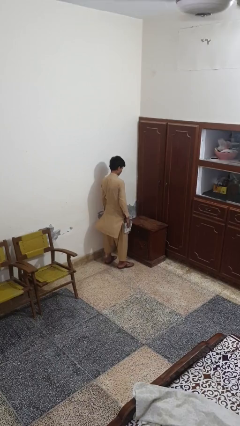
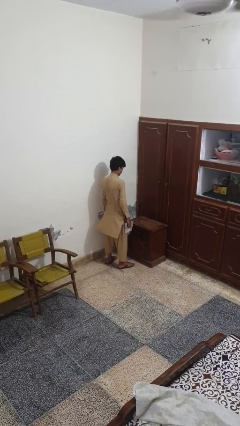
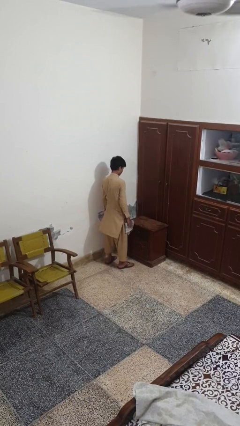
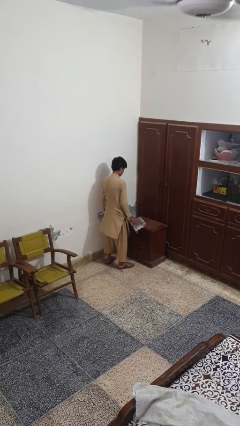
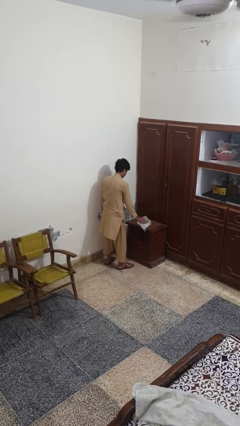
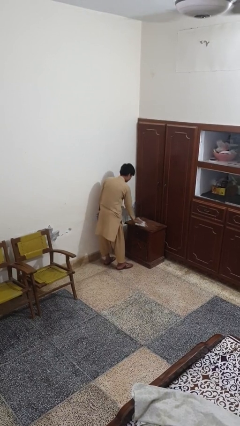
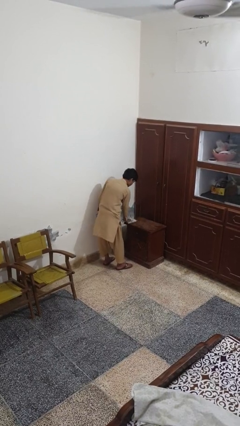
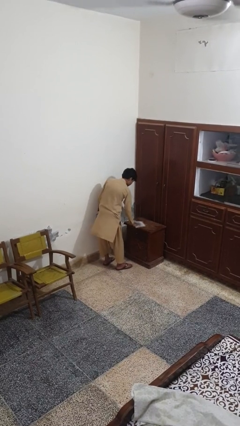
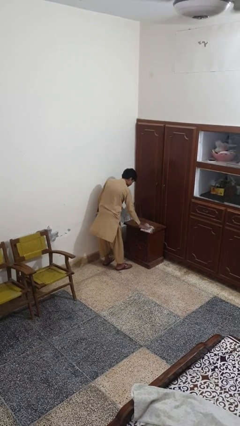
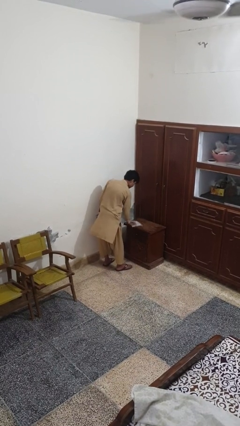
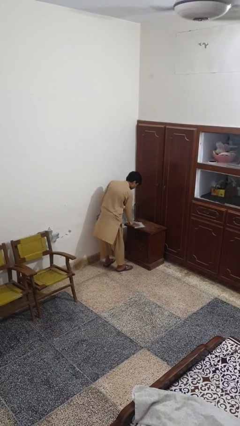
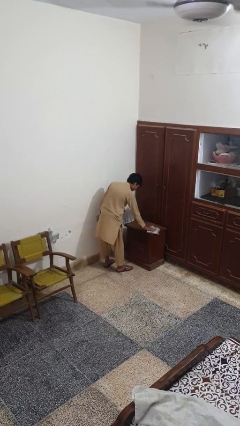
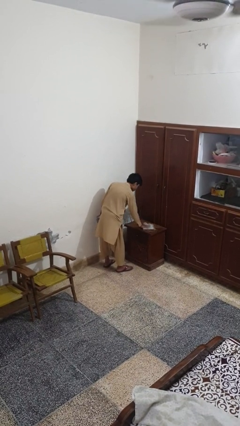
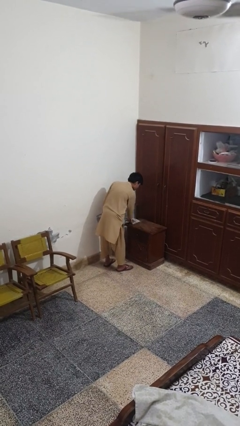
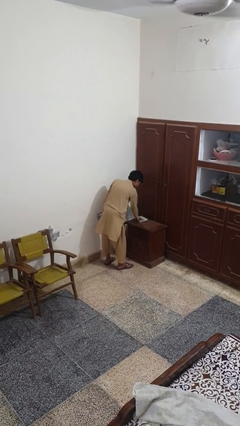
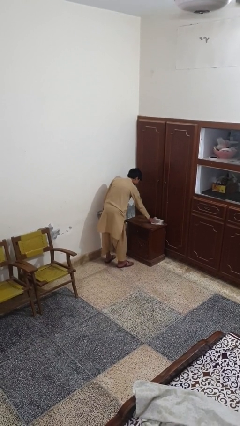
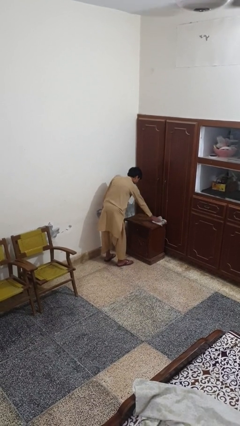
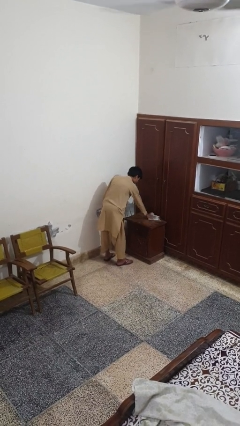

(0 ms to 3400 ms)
person cleans table with rag

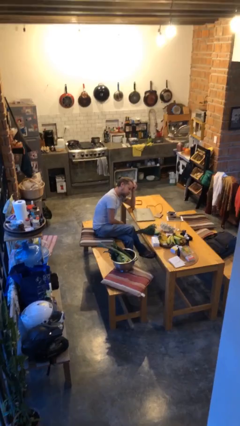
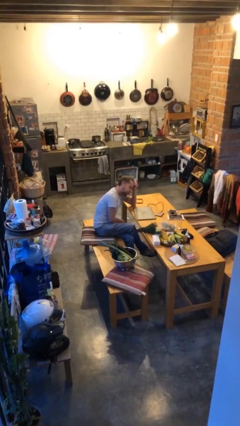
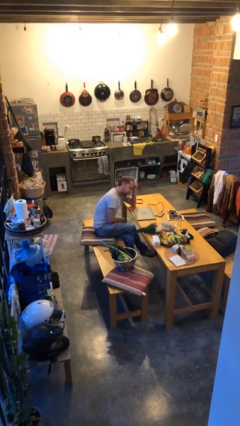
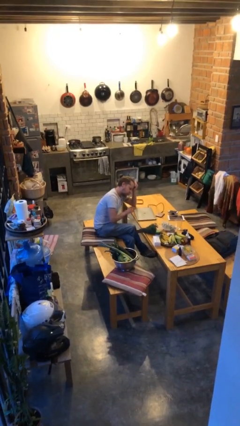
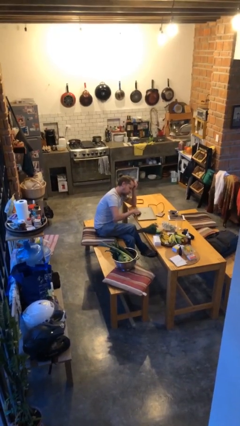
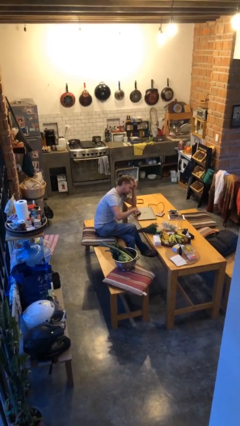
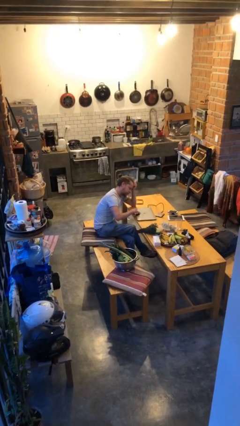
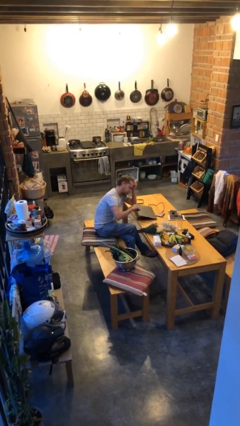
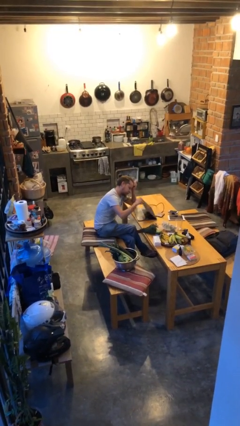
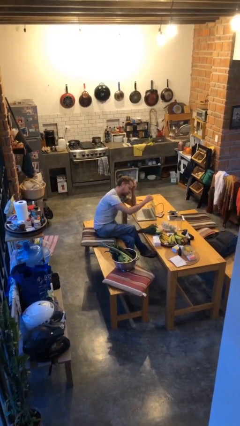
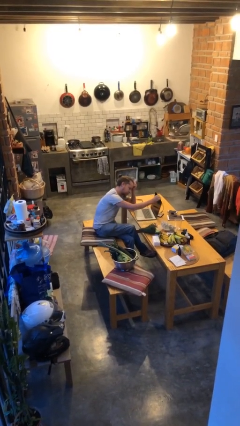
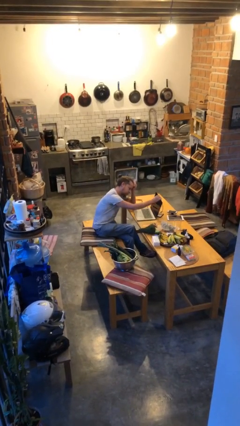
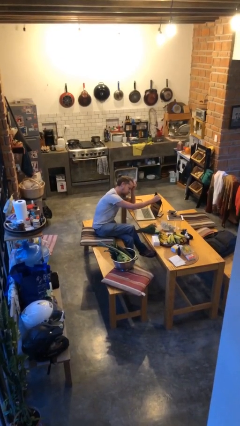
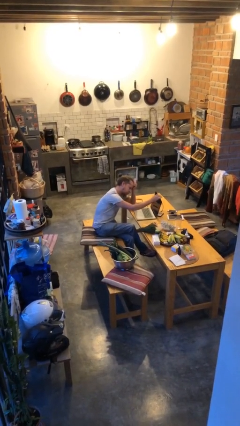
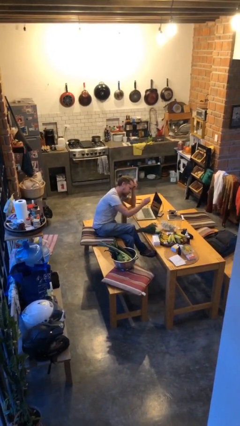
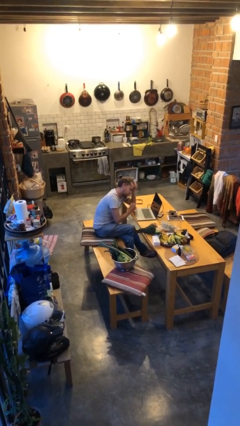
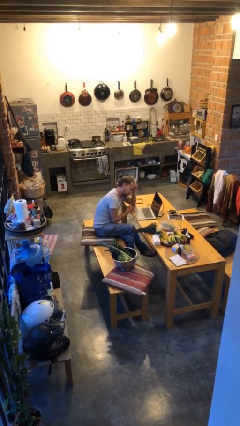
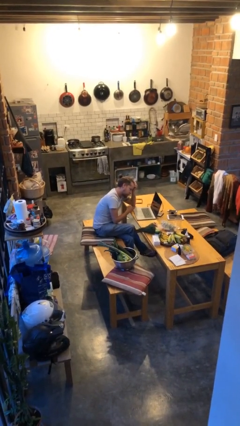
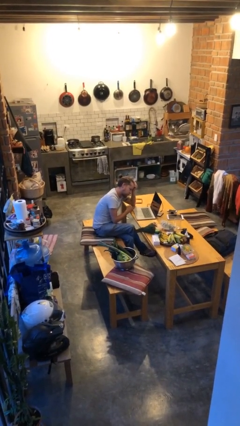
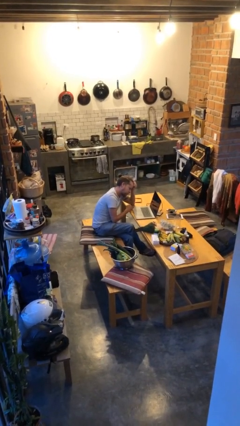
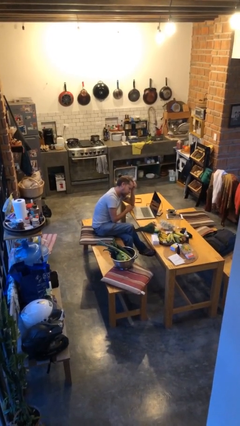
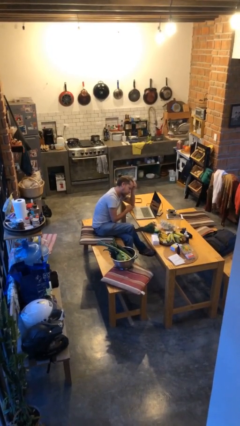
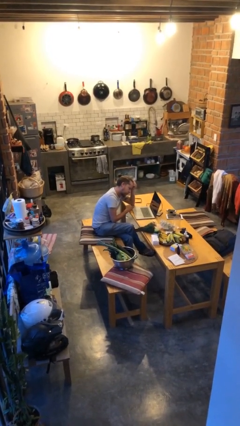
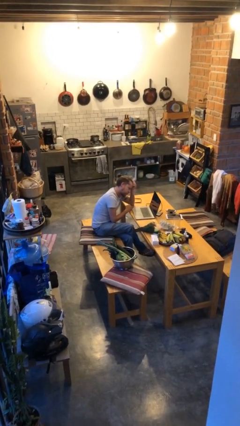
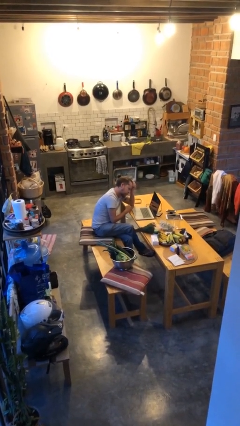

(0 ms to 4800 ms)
person opens laptop

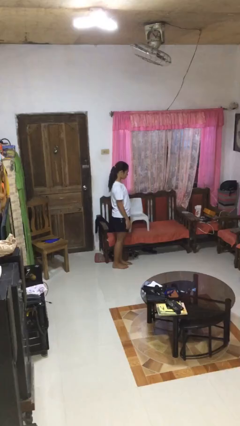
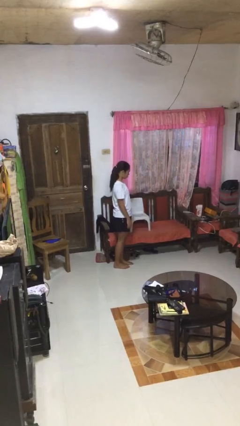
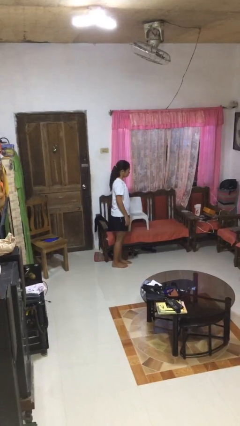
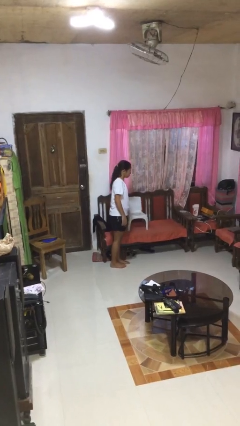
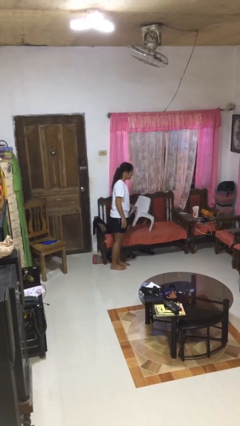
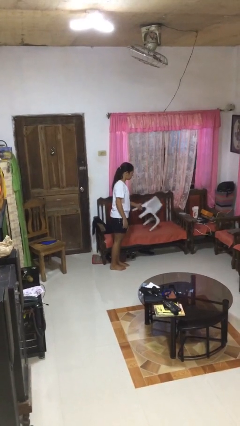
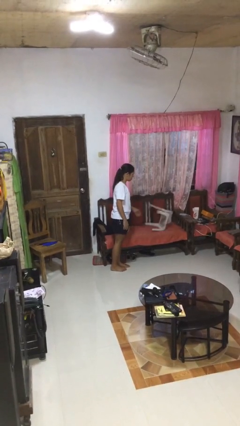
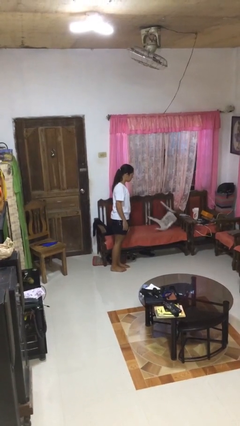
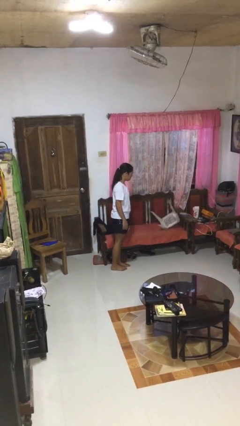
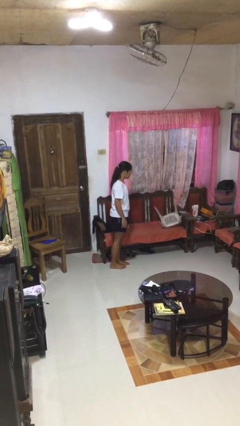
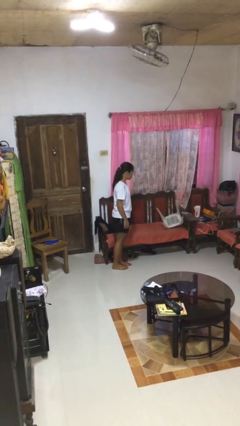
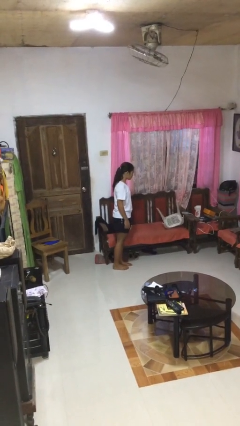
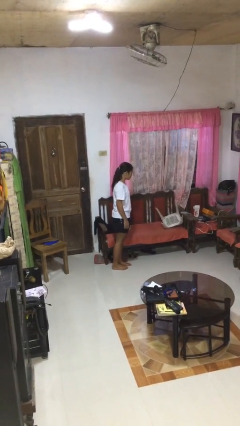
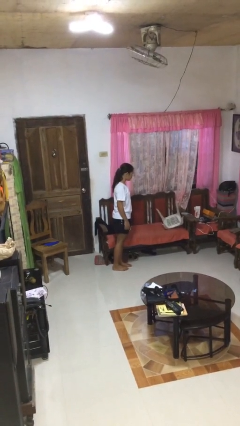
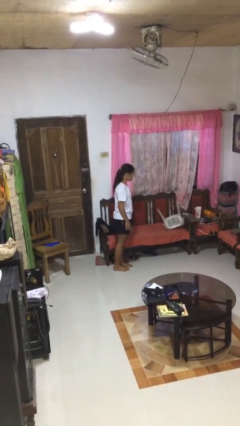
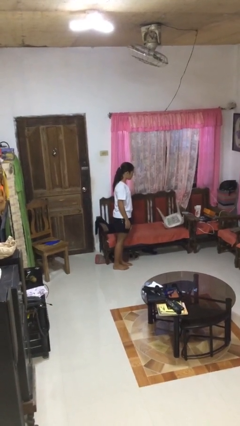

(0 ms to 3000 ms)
person knocks over furniture

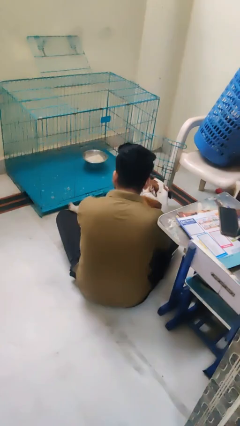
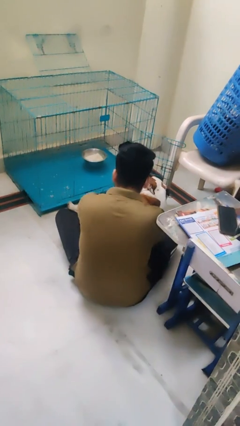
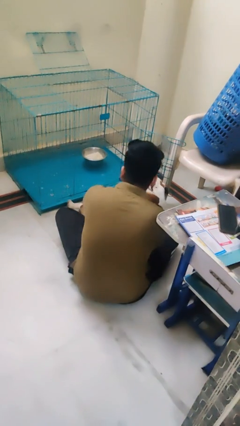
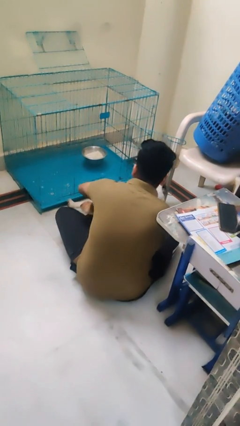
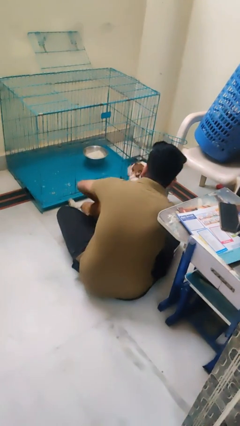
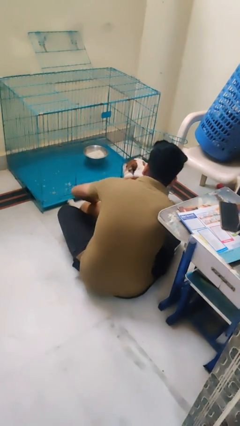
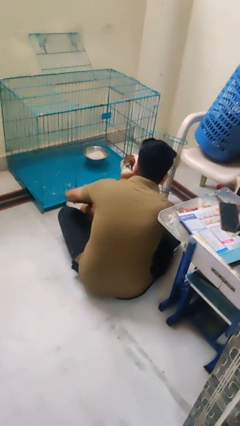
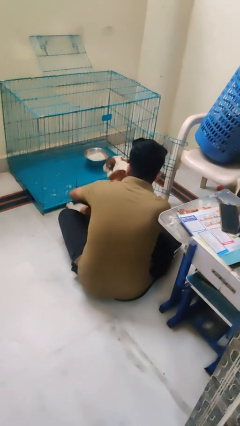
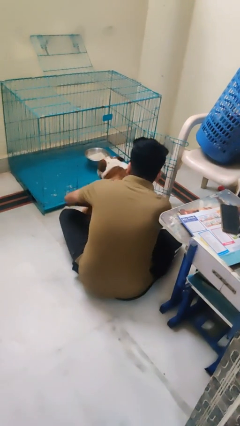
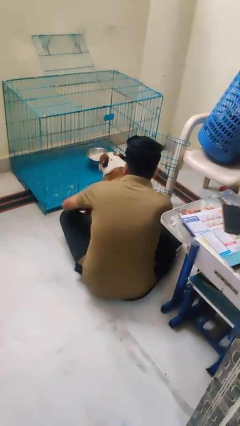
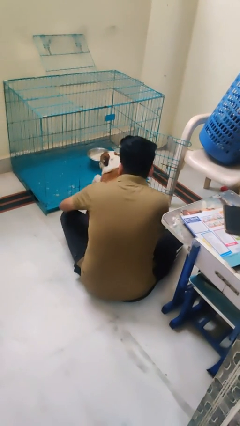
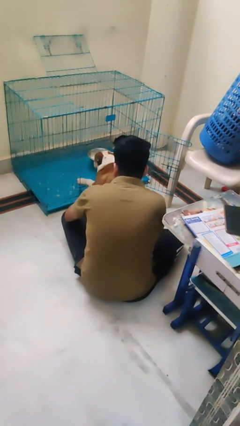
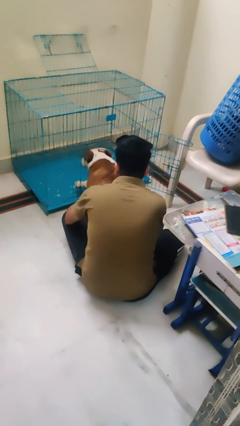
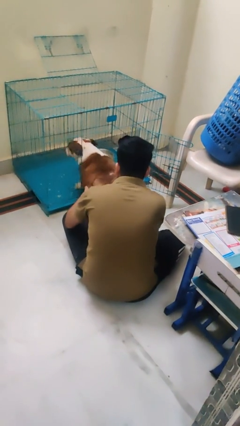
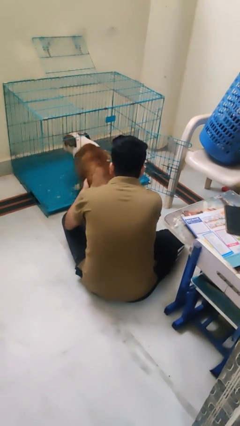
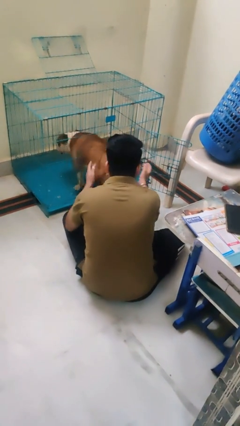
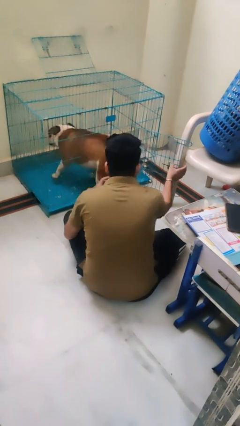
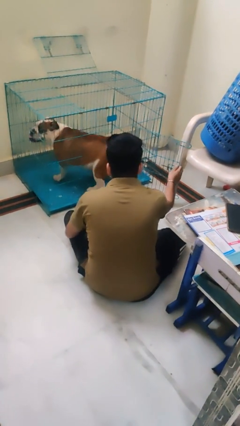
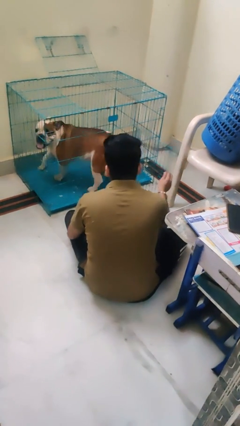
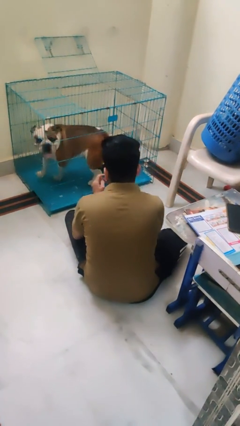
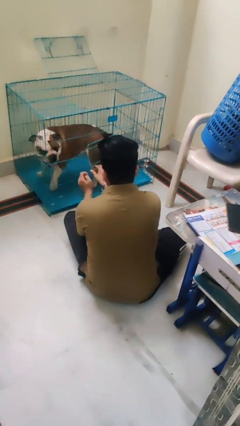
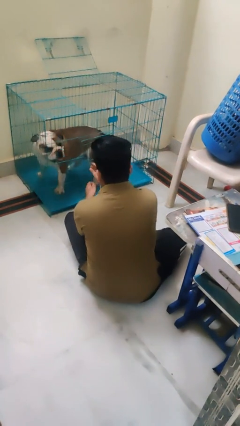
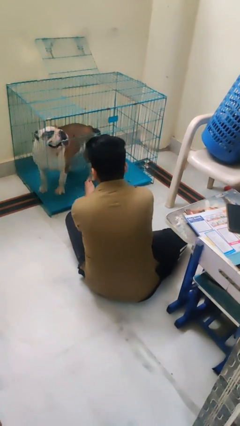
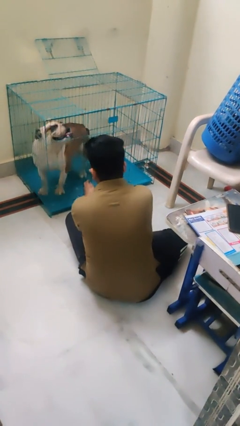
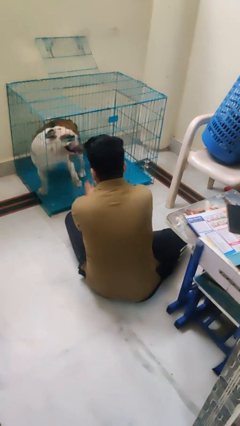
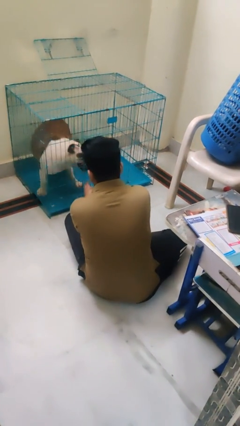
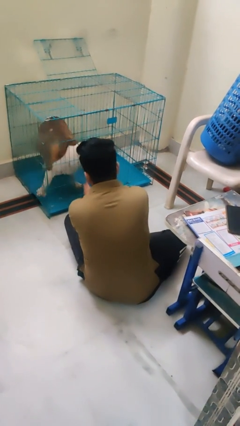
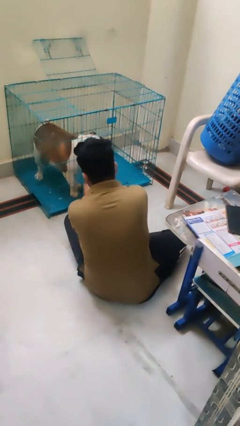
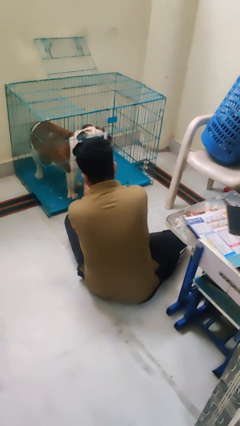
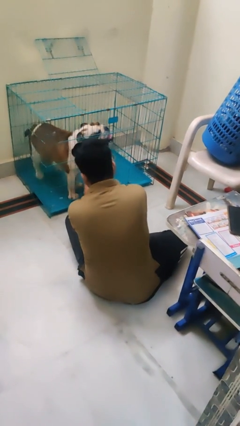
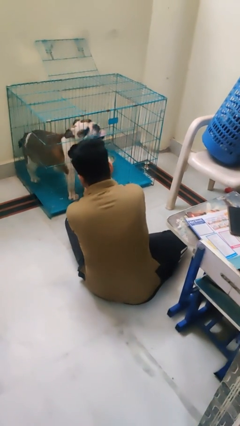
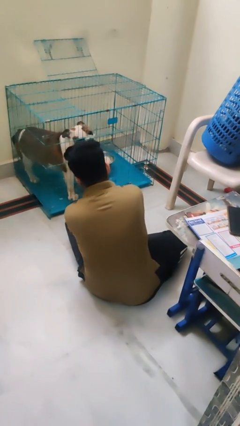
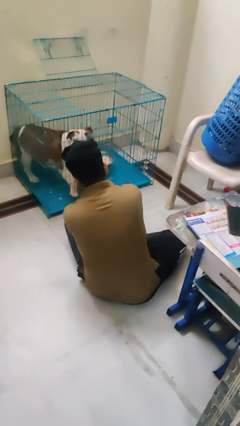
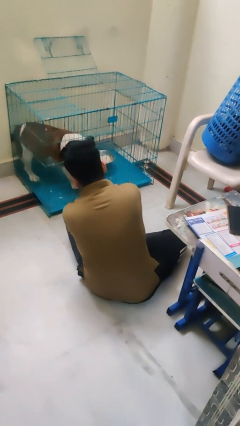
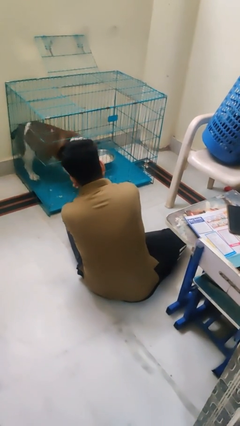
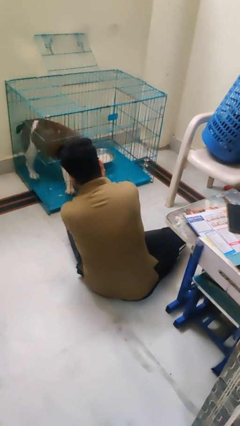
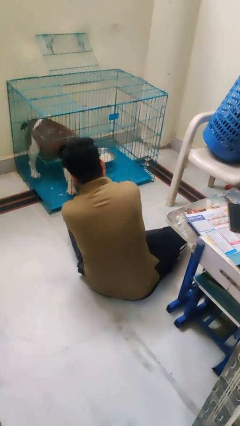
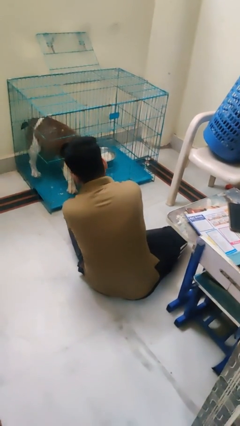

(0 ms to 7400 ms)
person crates dog
